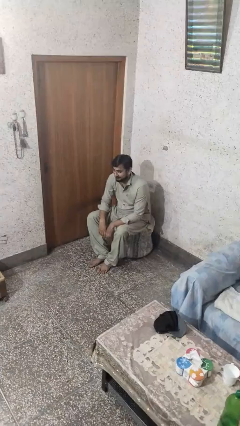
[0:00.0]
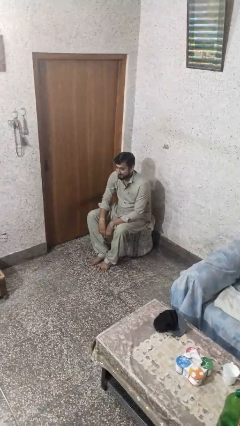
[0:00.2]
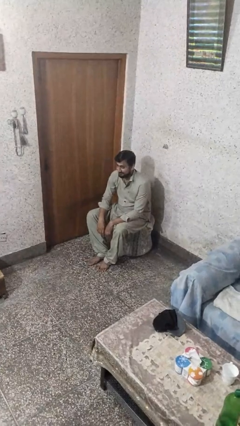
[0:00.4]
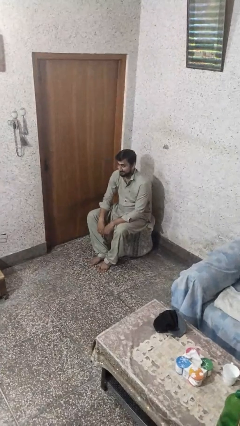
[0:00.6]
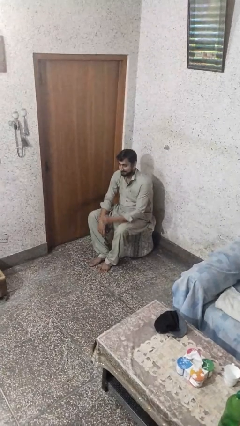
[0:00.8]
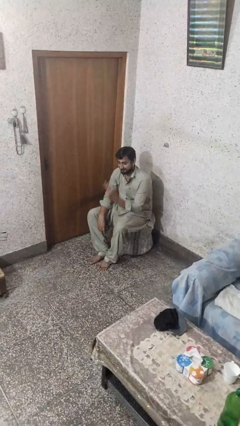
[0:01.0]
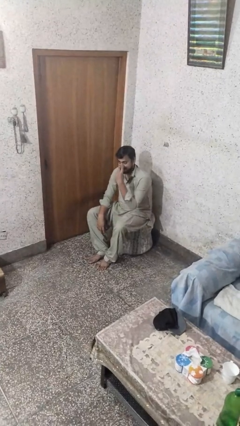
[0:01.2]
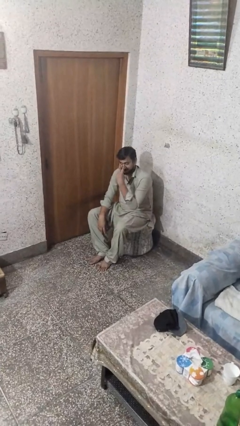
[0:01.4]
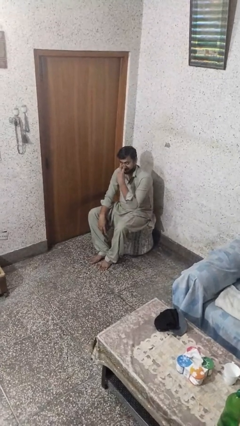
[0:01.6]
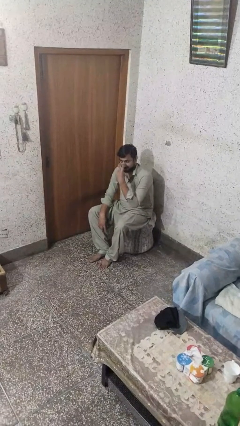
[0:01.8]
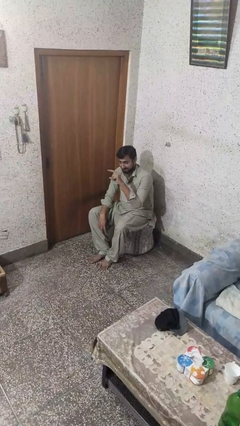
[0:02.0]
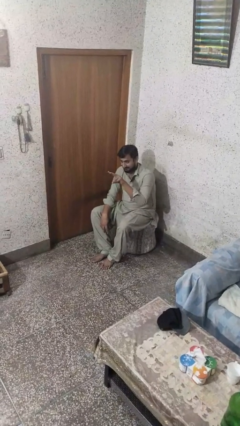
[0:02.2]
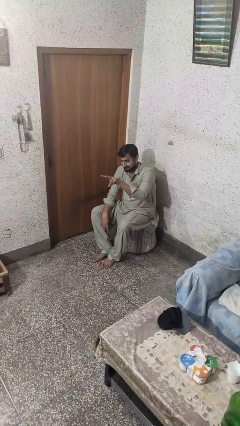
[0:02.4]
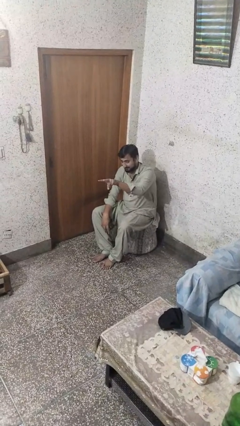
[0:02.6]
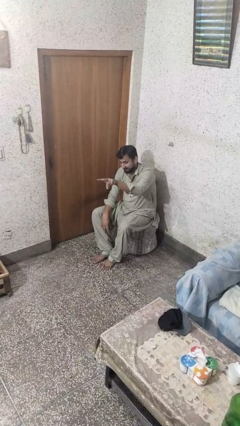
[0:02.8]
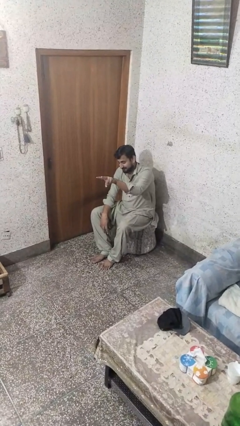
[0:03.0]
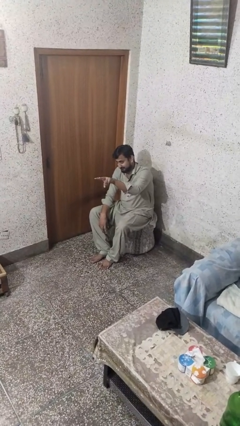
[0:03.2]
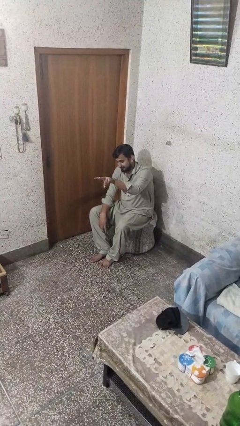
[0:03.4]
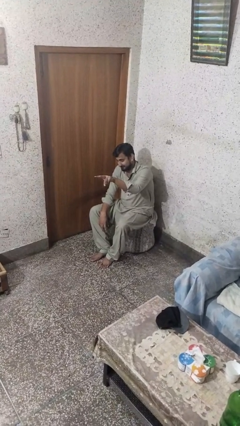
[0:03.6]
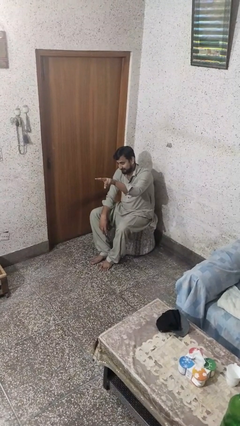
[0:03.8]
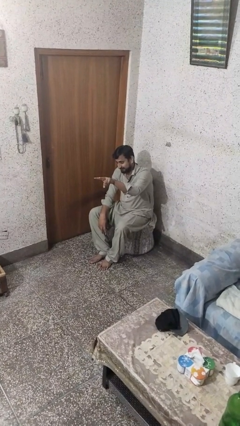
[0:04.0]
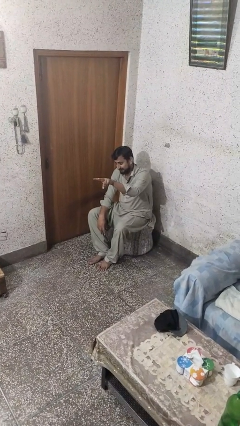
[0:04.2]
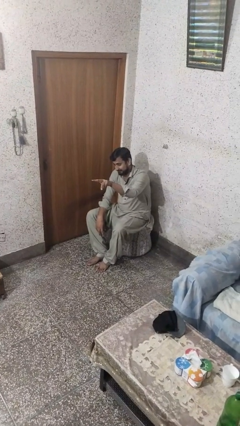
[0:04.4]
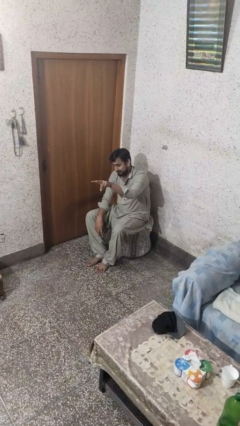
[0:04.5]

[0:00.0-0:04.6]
person gestures watch closely

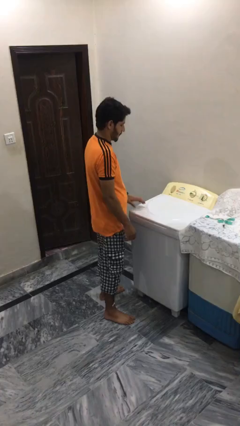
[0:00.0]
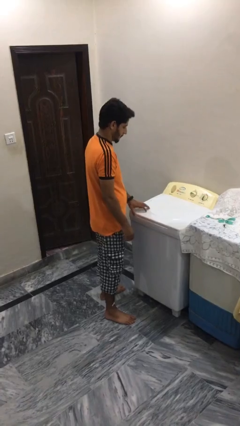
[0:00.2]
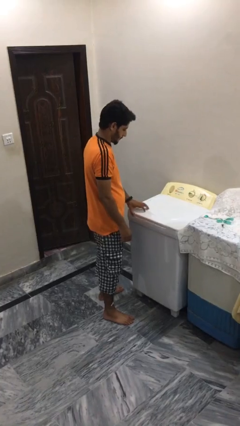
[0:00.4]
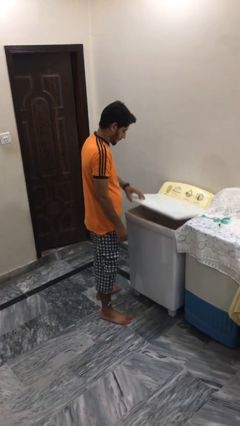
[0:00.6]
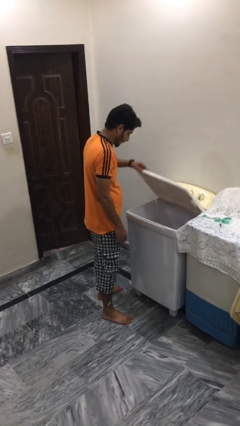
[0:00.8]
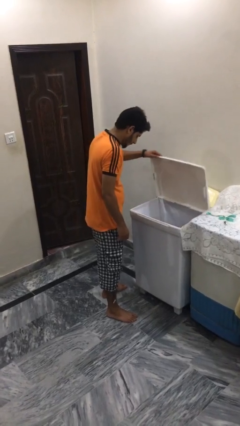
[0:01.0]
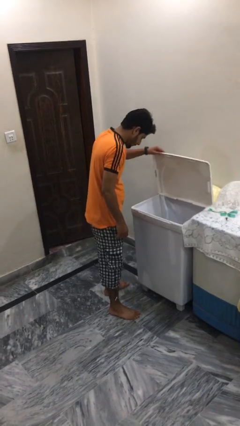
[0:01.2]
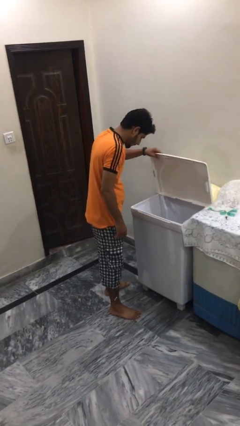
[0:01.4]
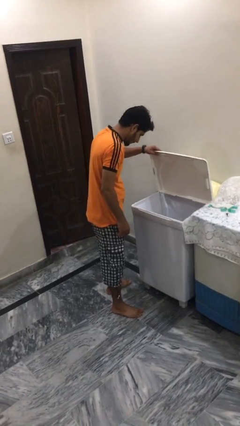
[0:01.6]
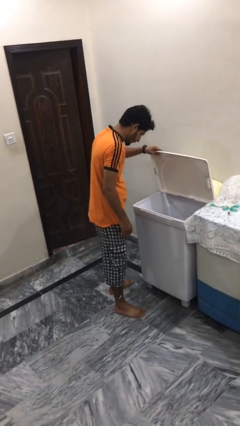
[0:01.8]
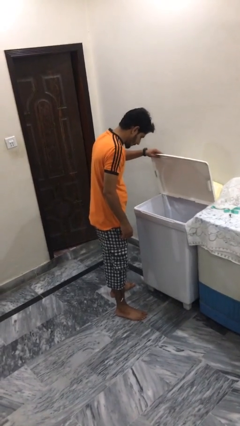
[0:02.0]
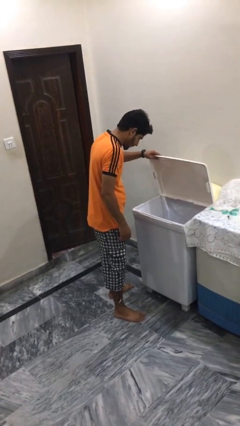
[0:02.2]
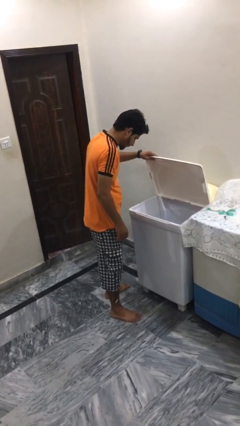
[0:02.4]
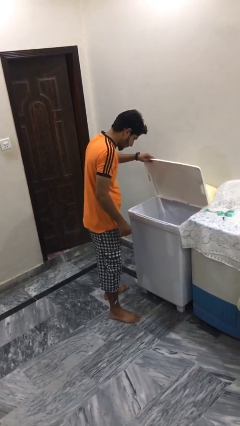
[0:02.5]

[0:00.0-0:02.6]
person opens clothes washer

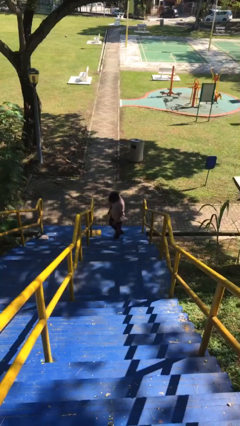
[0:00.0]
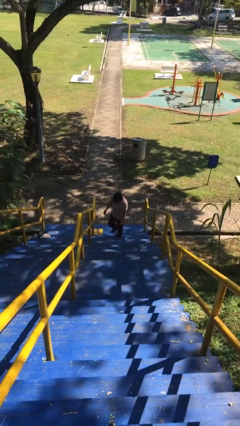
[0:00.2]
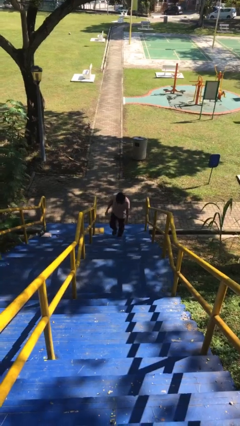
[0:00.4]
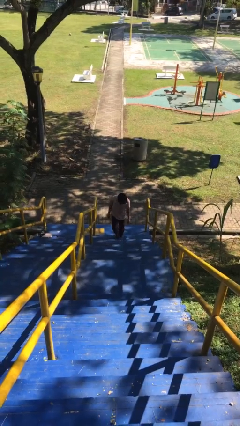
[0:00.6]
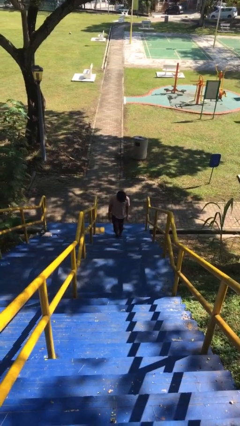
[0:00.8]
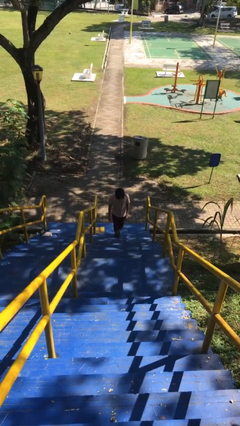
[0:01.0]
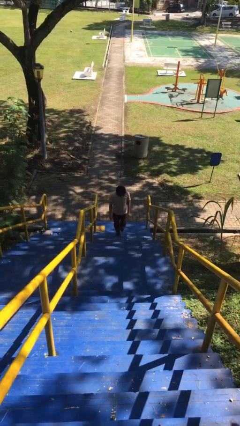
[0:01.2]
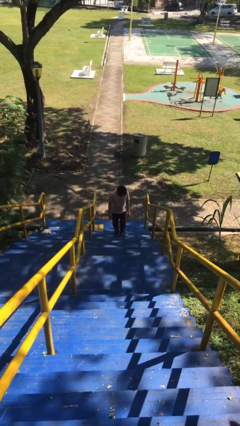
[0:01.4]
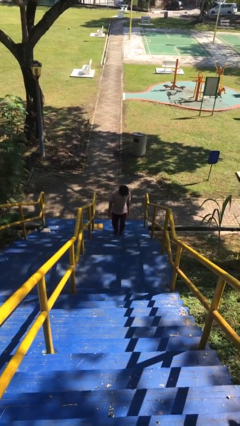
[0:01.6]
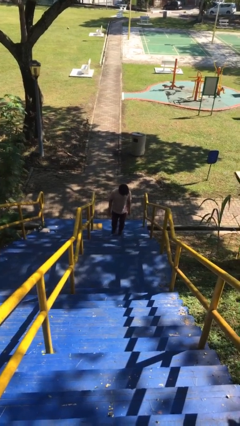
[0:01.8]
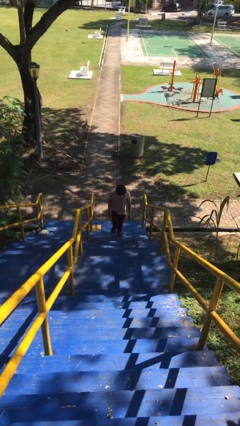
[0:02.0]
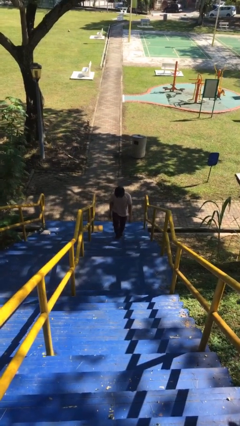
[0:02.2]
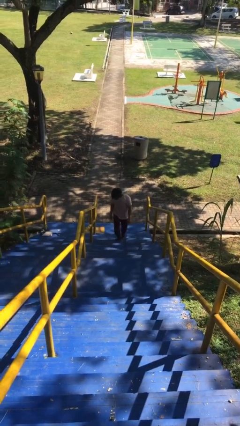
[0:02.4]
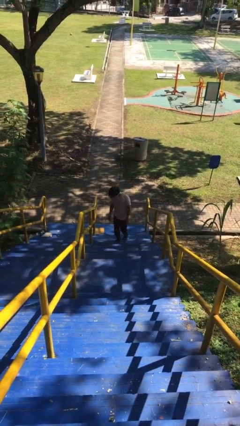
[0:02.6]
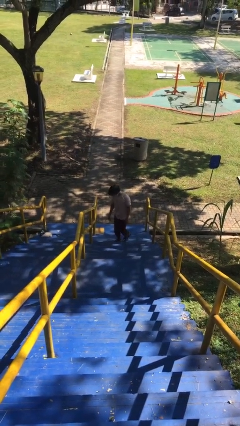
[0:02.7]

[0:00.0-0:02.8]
person climbs up stairs

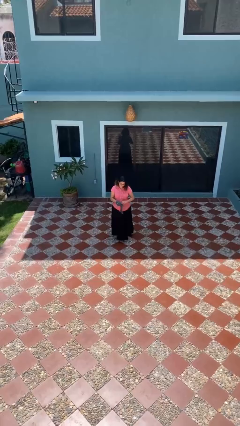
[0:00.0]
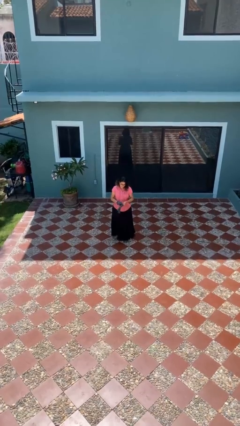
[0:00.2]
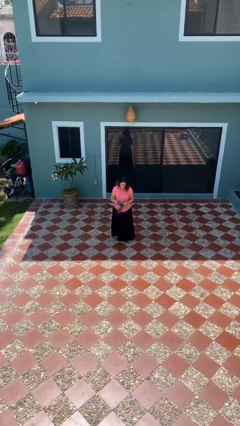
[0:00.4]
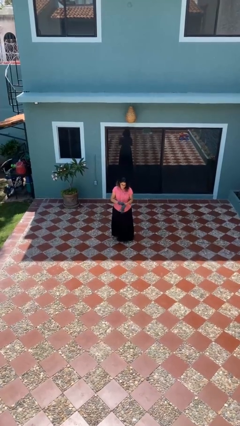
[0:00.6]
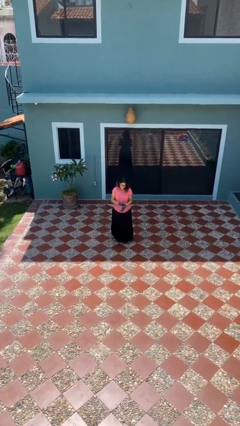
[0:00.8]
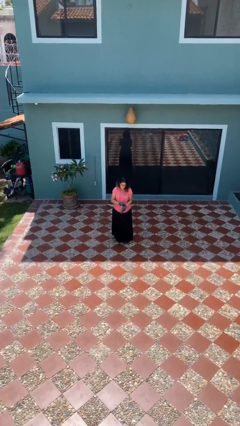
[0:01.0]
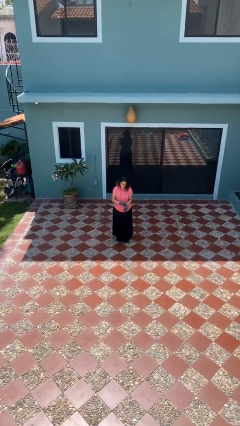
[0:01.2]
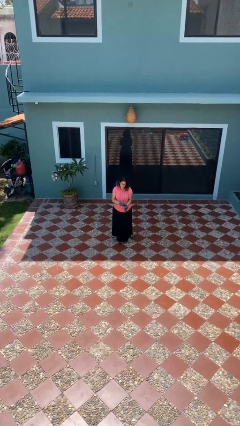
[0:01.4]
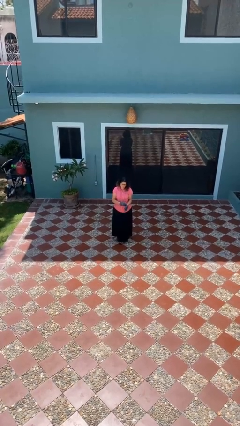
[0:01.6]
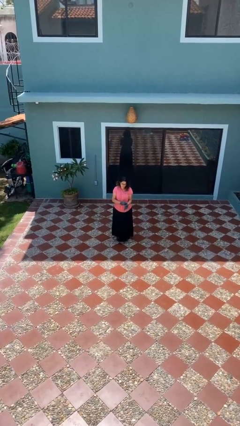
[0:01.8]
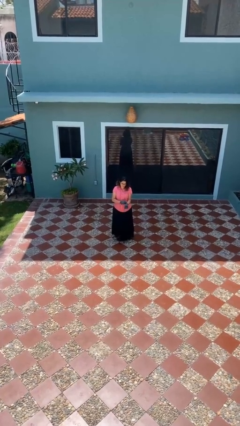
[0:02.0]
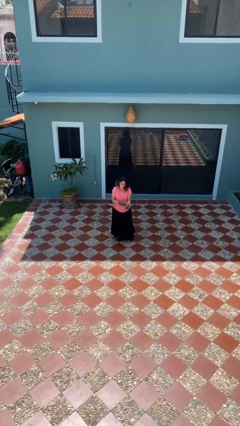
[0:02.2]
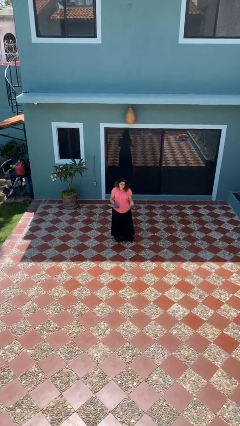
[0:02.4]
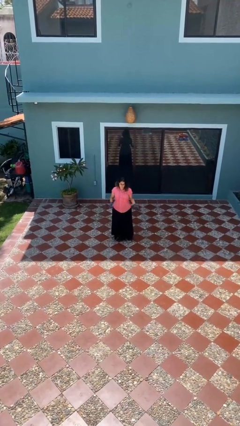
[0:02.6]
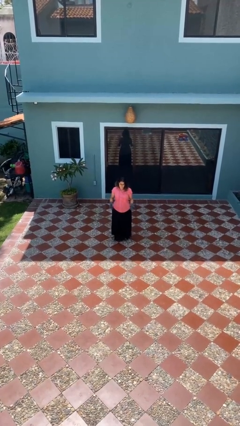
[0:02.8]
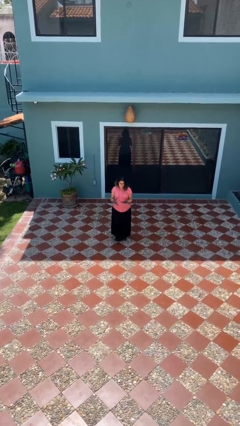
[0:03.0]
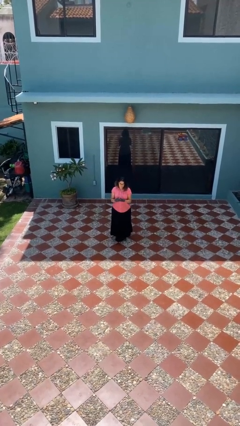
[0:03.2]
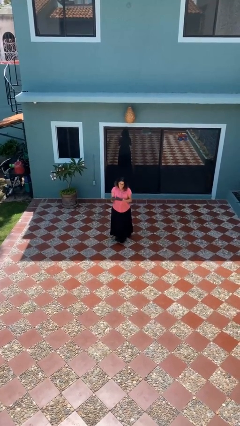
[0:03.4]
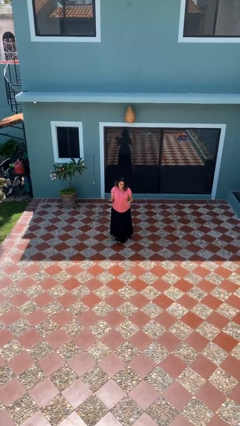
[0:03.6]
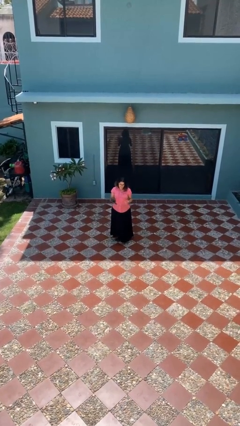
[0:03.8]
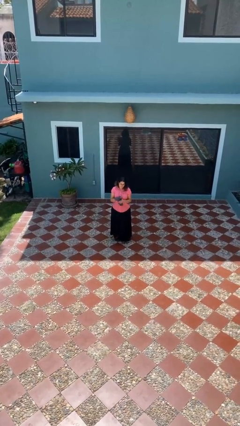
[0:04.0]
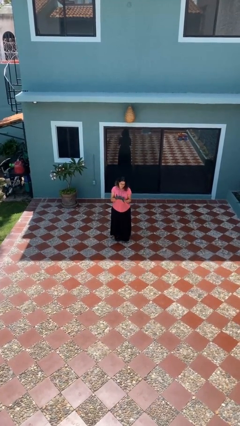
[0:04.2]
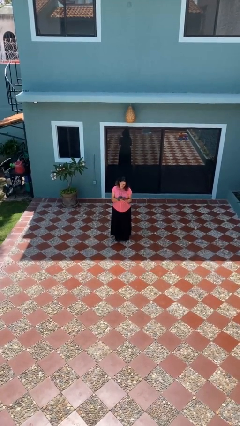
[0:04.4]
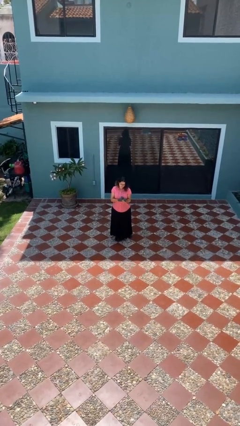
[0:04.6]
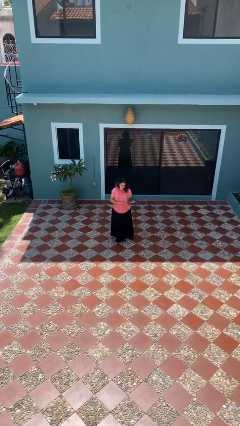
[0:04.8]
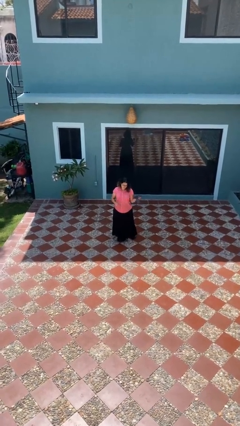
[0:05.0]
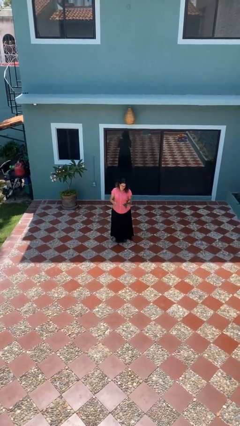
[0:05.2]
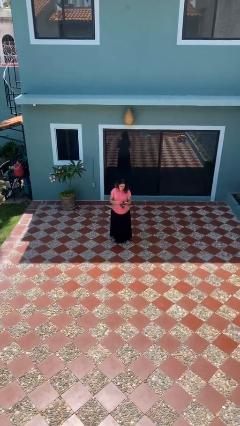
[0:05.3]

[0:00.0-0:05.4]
person takes off gloves

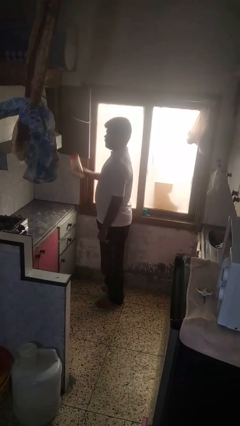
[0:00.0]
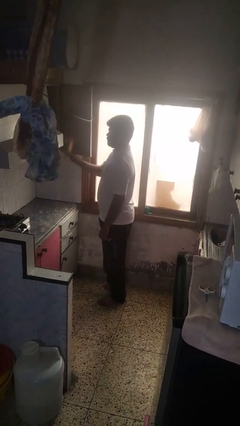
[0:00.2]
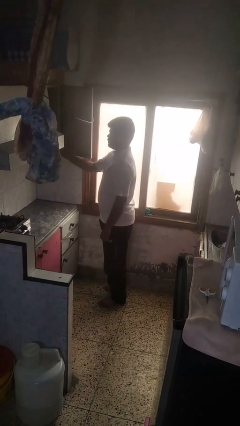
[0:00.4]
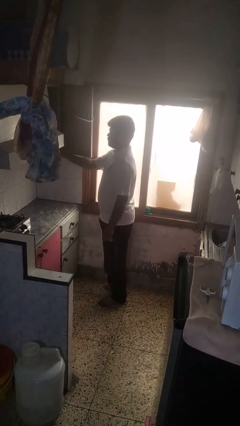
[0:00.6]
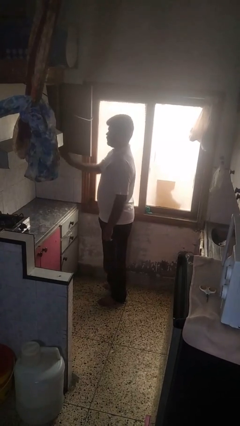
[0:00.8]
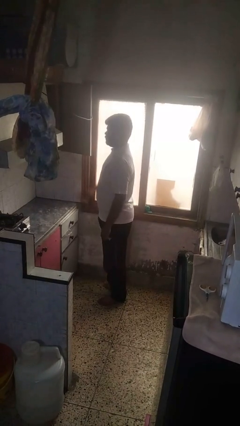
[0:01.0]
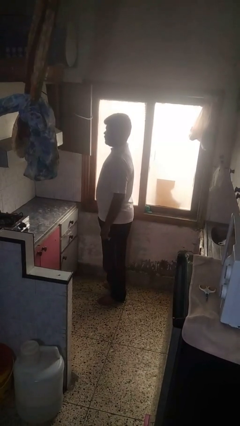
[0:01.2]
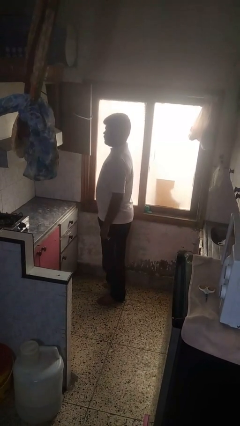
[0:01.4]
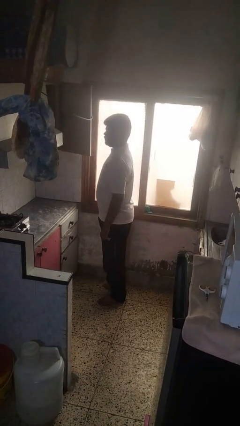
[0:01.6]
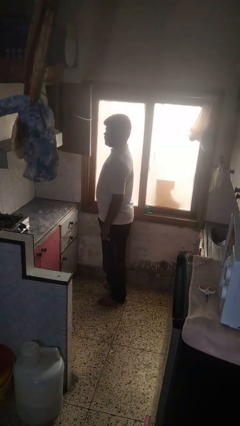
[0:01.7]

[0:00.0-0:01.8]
person puts down object into cabinet
